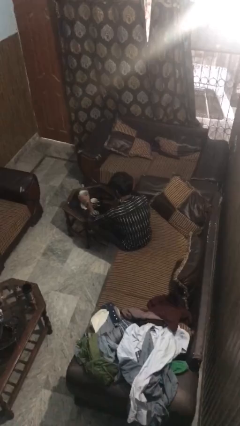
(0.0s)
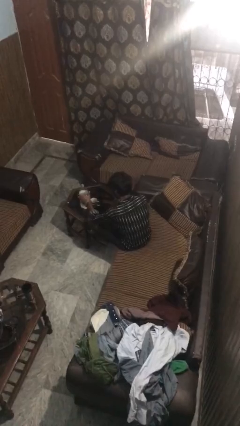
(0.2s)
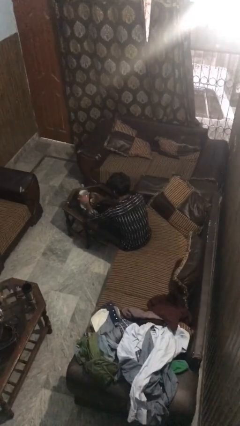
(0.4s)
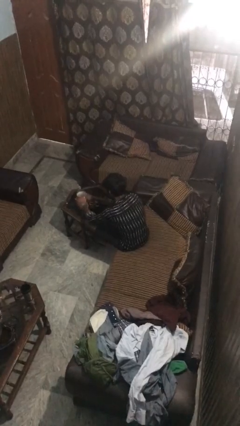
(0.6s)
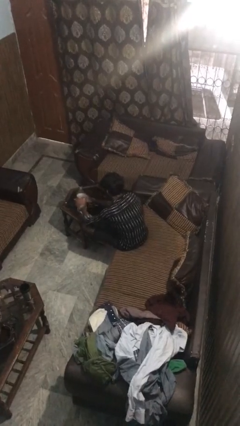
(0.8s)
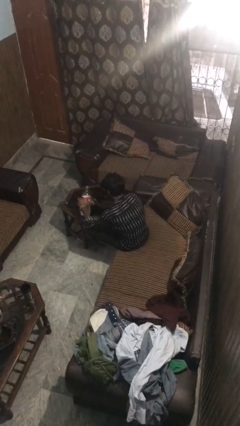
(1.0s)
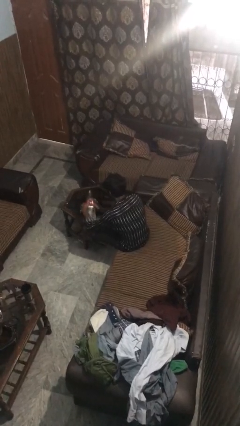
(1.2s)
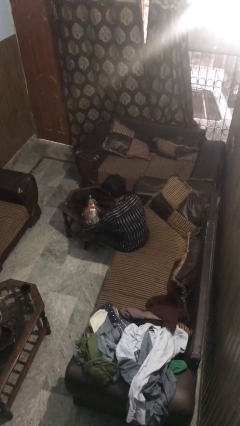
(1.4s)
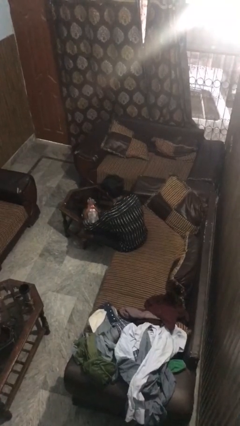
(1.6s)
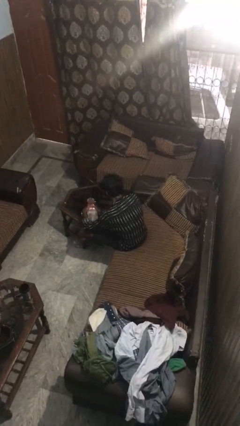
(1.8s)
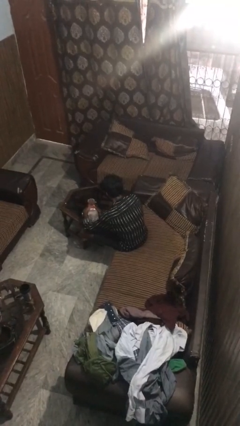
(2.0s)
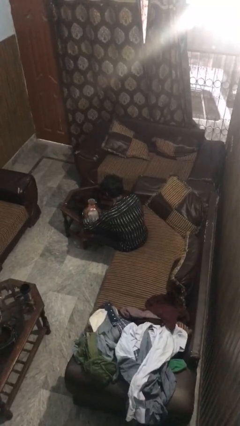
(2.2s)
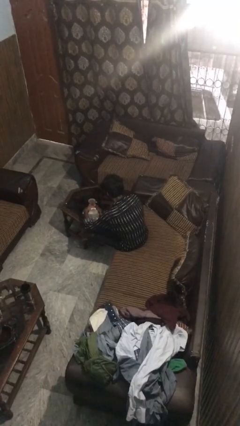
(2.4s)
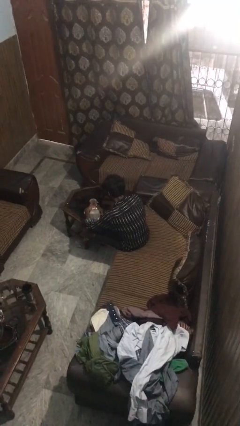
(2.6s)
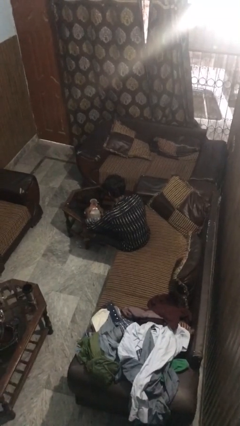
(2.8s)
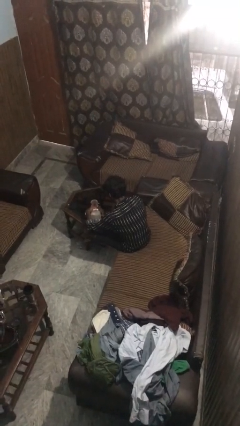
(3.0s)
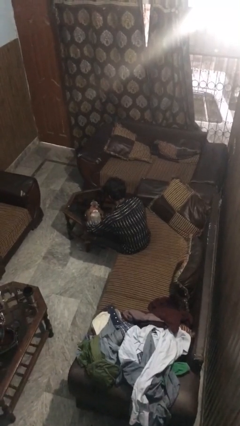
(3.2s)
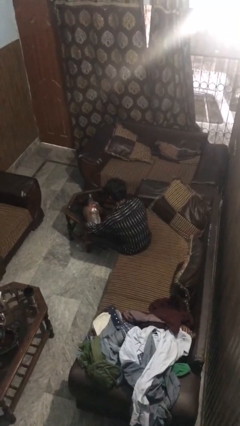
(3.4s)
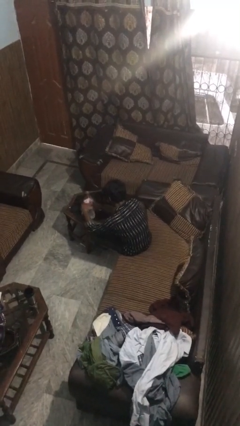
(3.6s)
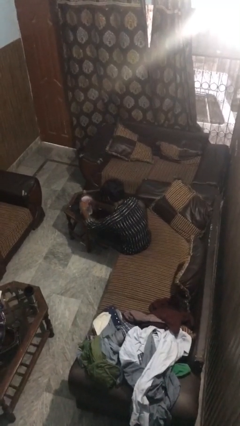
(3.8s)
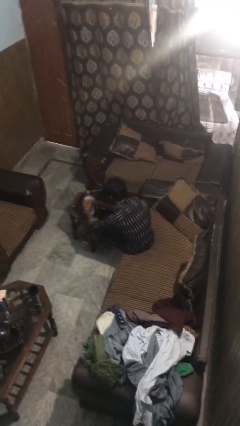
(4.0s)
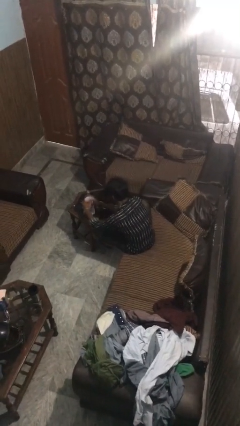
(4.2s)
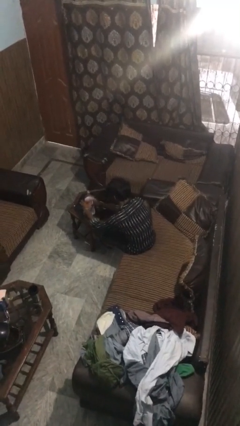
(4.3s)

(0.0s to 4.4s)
person pours liquid into cup

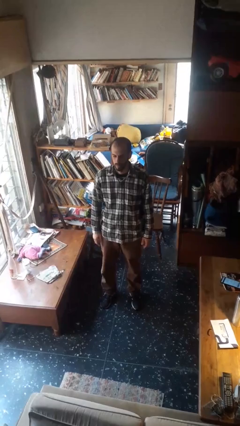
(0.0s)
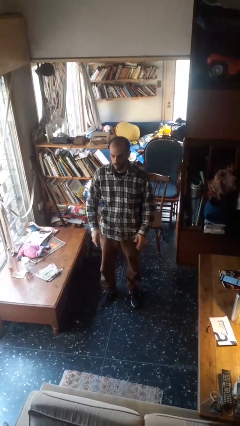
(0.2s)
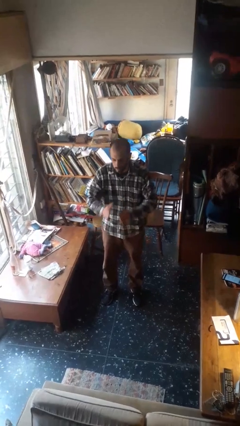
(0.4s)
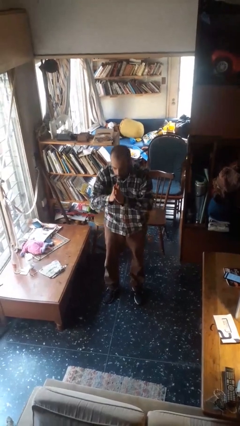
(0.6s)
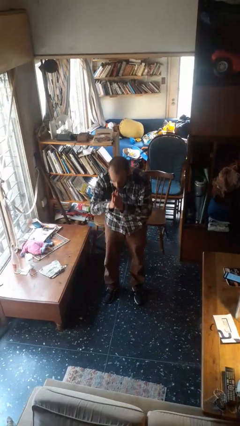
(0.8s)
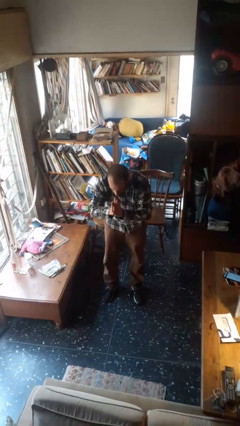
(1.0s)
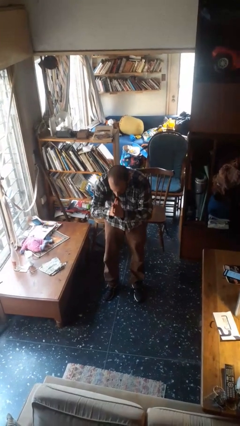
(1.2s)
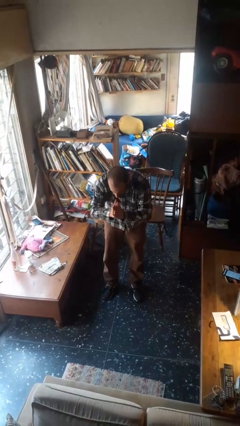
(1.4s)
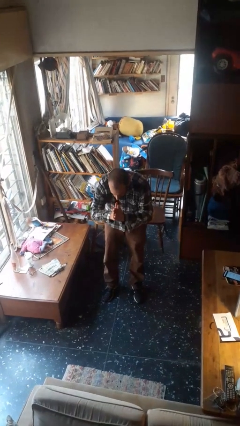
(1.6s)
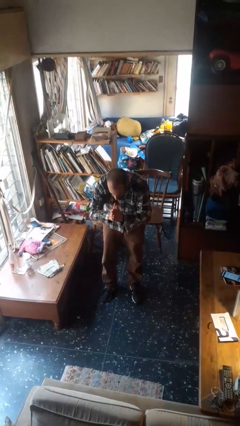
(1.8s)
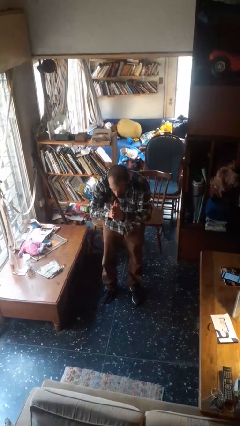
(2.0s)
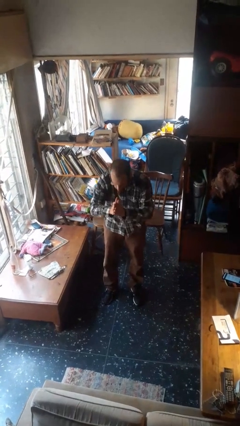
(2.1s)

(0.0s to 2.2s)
person bows

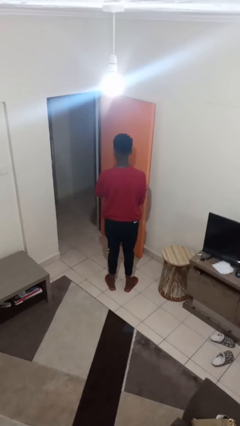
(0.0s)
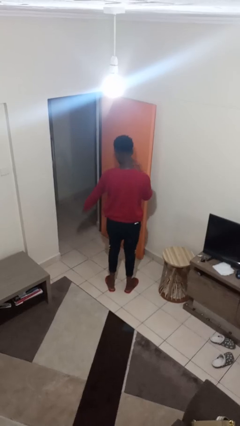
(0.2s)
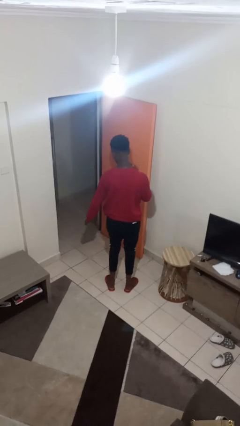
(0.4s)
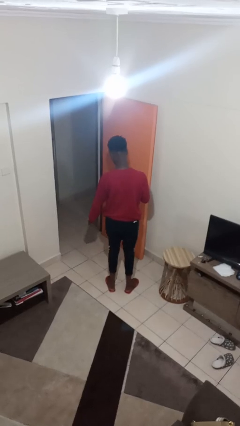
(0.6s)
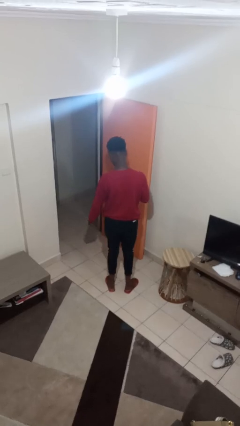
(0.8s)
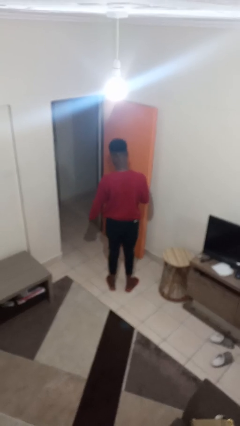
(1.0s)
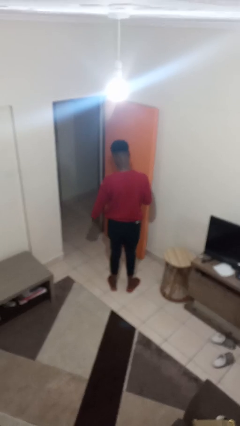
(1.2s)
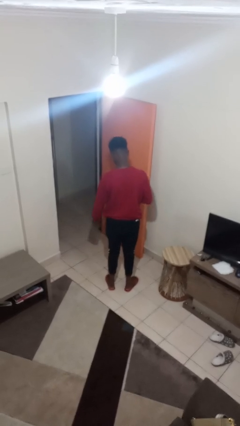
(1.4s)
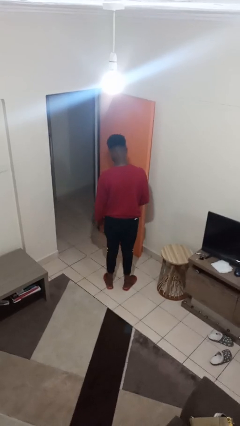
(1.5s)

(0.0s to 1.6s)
person karate chop

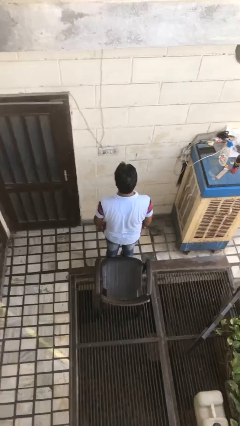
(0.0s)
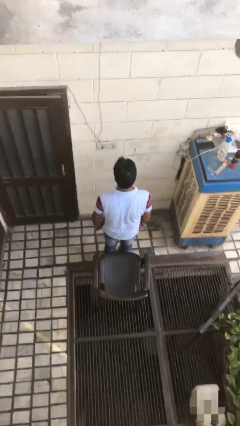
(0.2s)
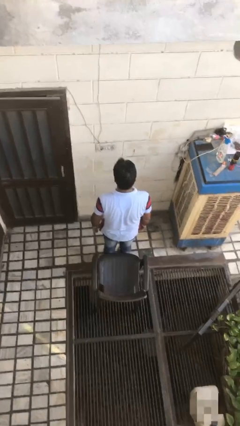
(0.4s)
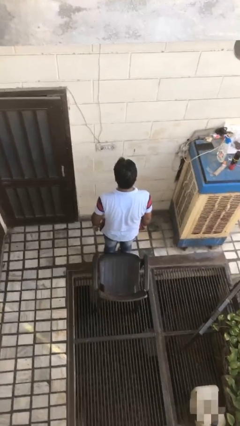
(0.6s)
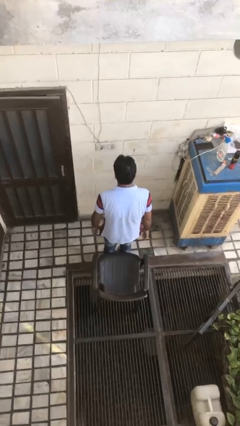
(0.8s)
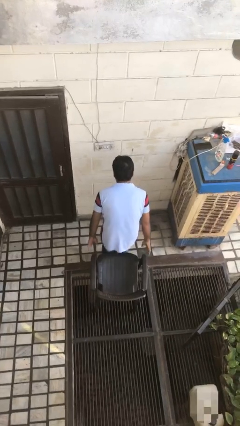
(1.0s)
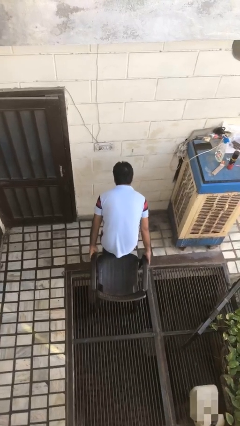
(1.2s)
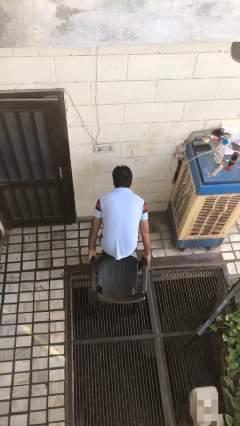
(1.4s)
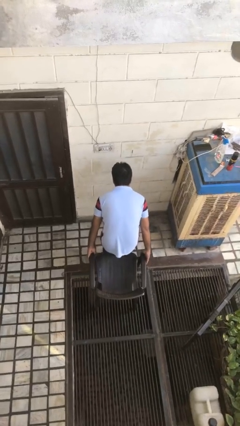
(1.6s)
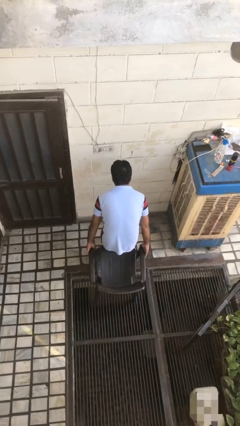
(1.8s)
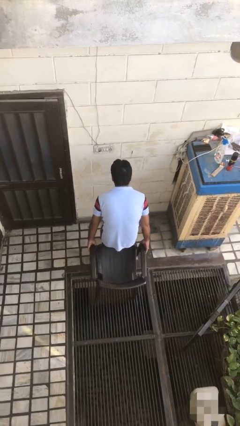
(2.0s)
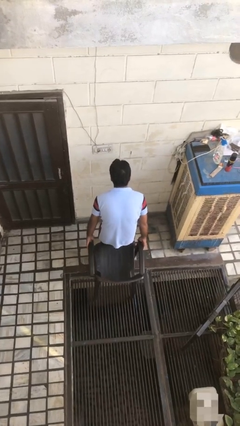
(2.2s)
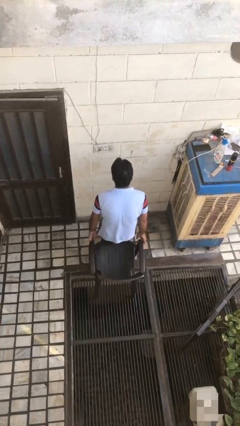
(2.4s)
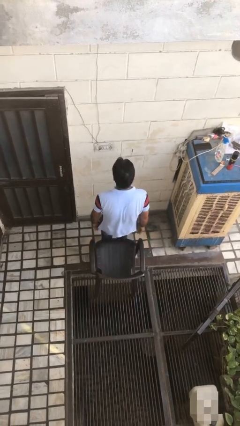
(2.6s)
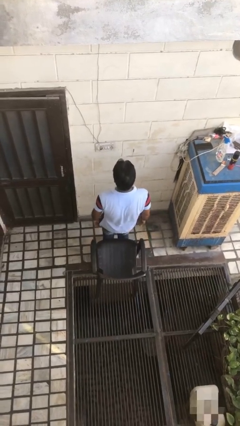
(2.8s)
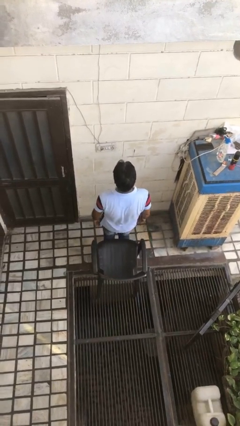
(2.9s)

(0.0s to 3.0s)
person pulls out chair

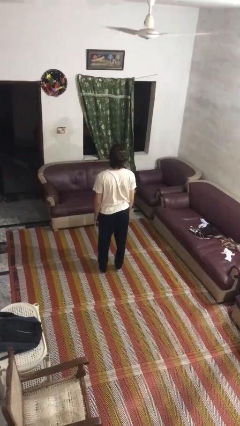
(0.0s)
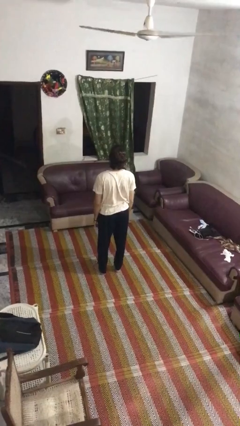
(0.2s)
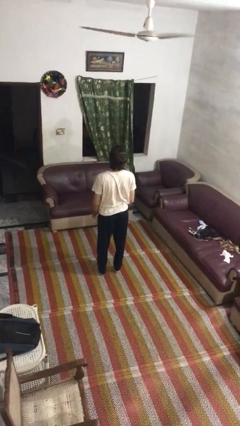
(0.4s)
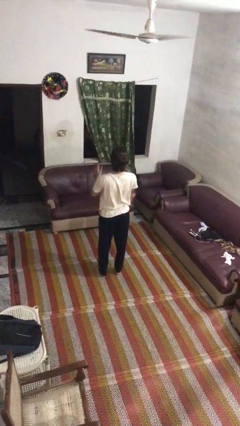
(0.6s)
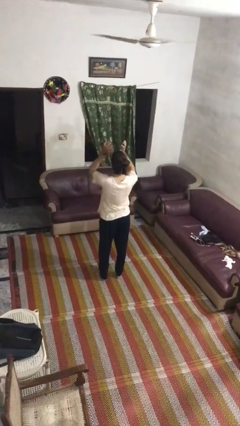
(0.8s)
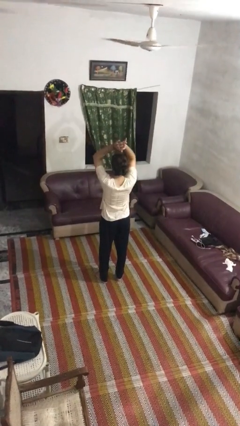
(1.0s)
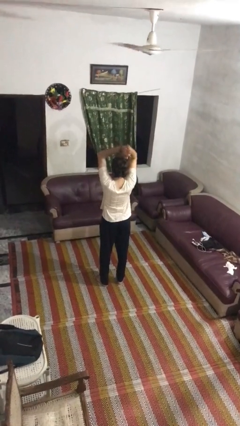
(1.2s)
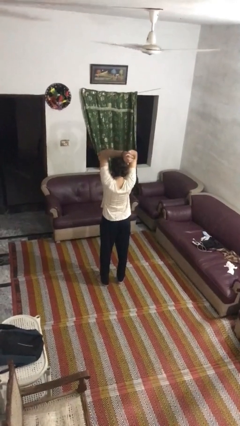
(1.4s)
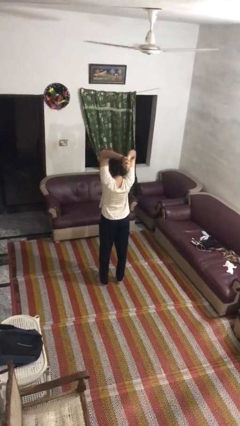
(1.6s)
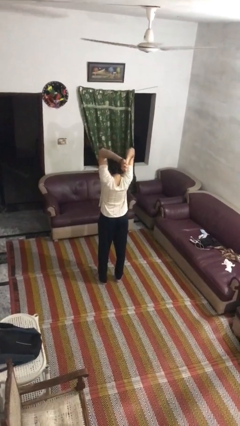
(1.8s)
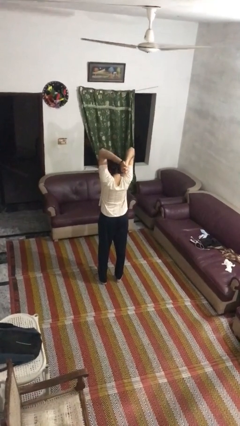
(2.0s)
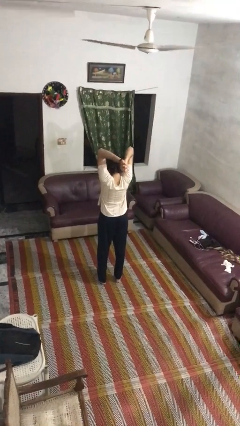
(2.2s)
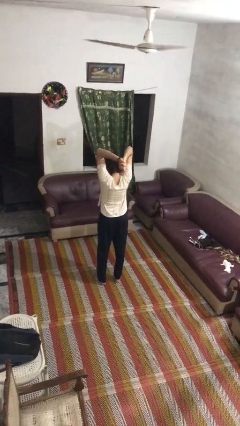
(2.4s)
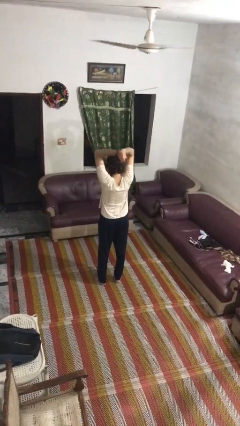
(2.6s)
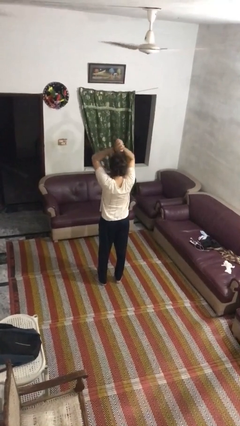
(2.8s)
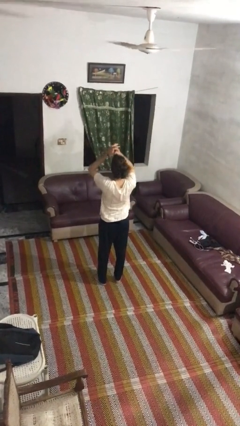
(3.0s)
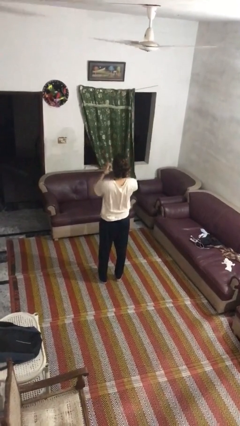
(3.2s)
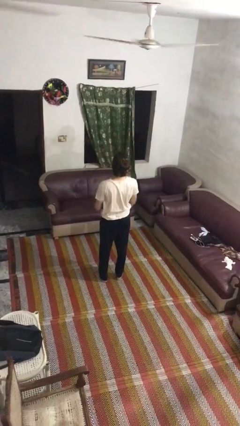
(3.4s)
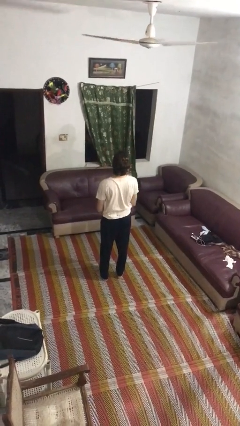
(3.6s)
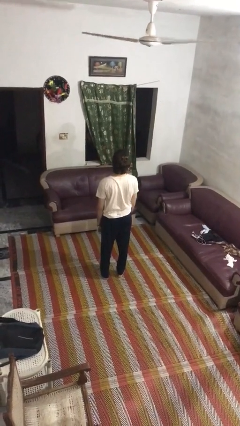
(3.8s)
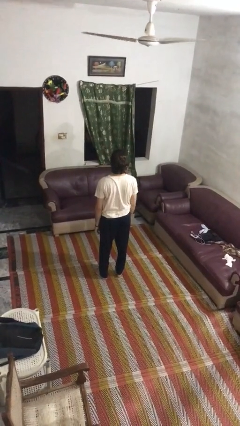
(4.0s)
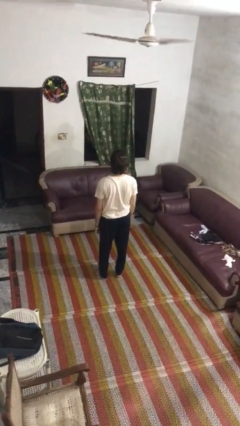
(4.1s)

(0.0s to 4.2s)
person stretches arms over head

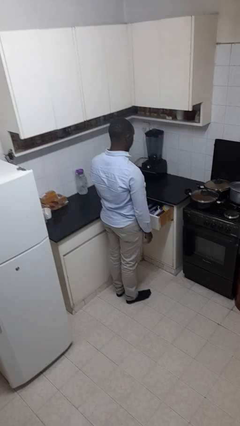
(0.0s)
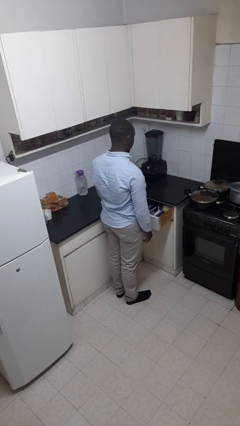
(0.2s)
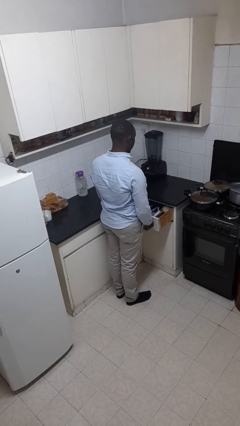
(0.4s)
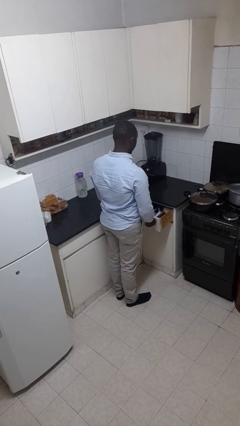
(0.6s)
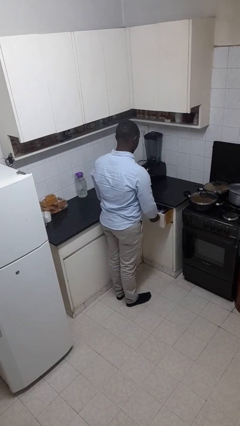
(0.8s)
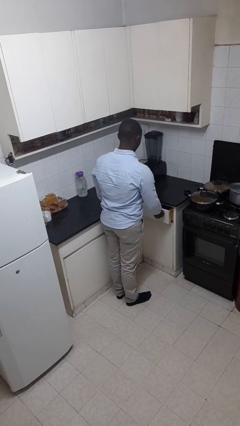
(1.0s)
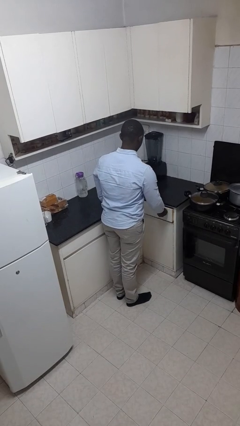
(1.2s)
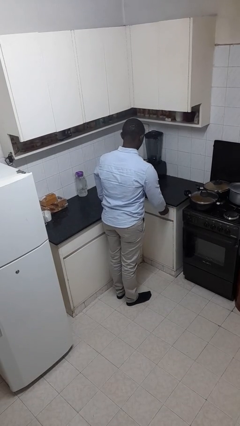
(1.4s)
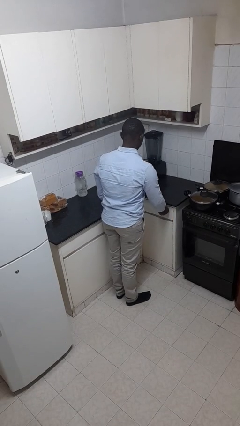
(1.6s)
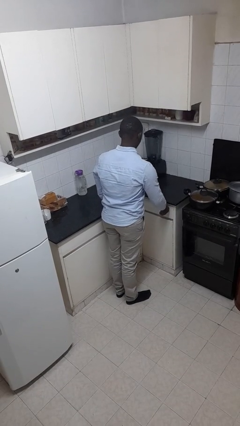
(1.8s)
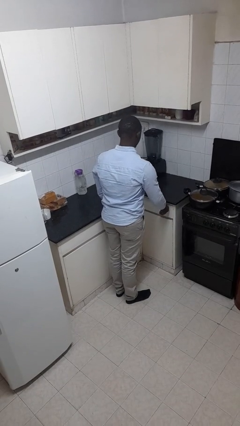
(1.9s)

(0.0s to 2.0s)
person closes kitchen drawer
